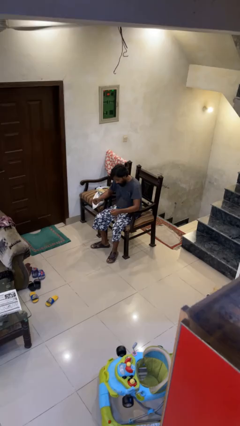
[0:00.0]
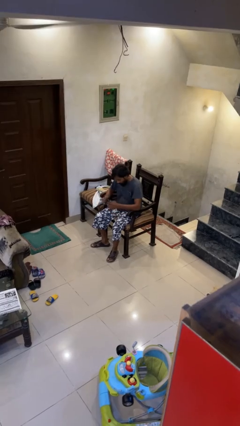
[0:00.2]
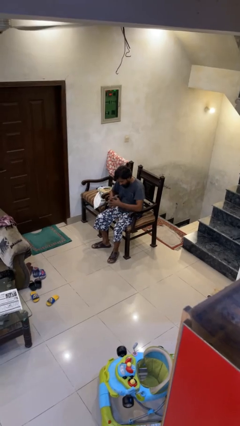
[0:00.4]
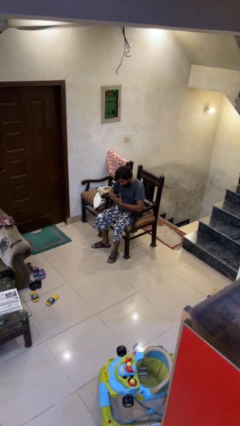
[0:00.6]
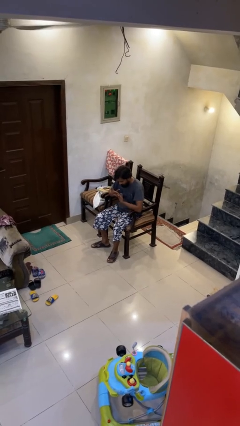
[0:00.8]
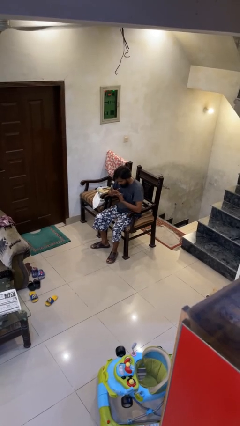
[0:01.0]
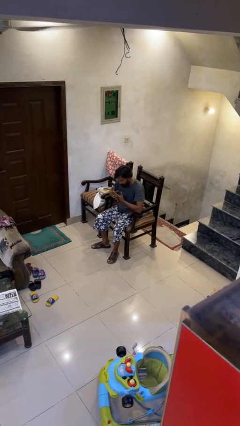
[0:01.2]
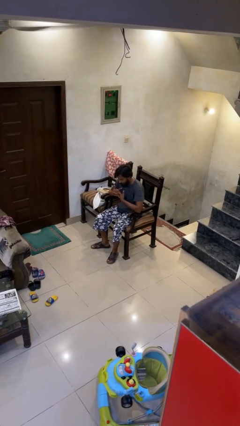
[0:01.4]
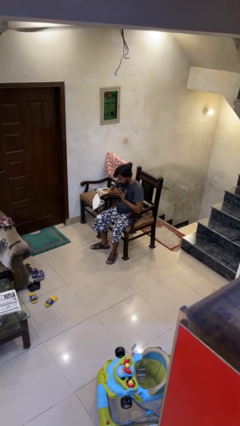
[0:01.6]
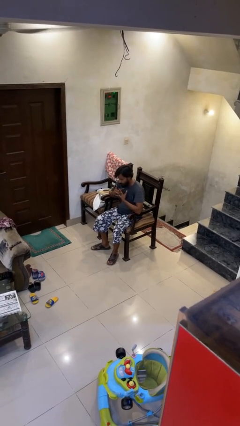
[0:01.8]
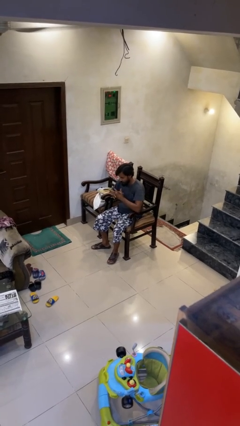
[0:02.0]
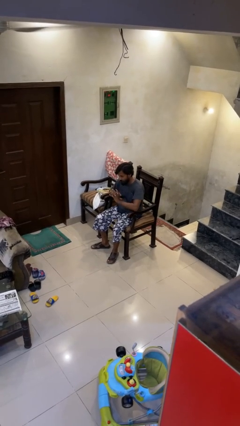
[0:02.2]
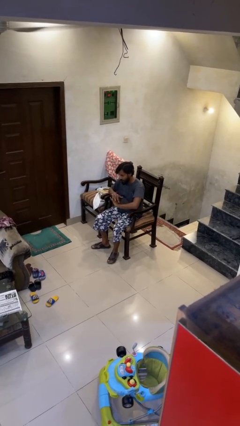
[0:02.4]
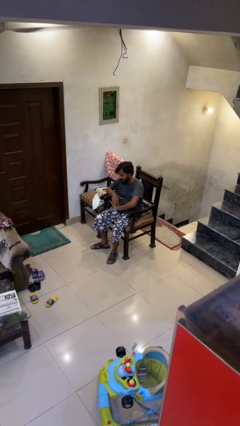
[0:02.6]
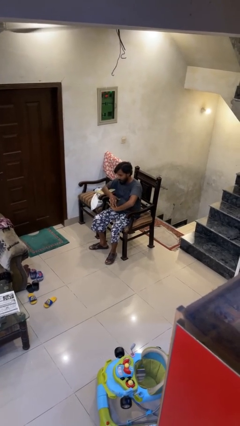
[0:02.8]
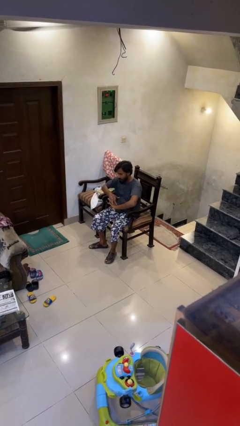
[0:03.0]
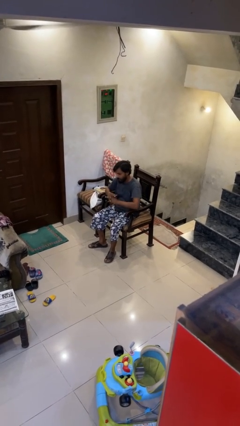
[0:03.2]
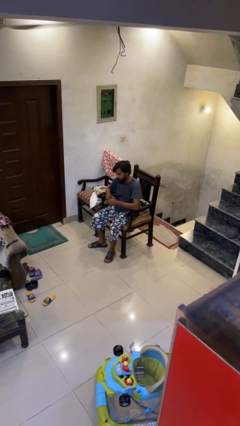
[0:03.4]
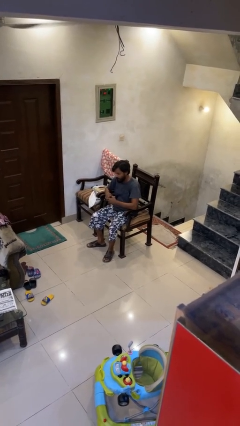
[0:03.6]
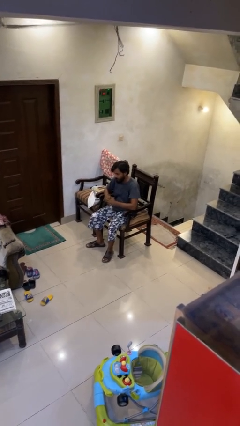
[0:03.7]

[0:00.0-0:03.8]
person cracks knuckles

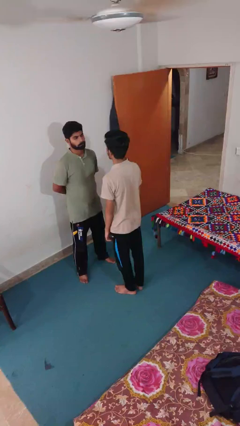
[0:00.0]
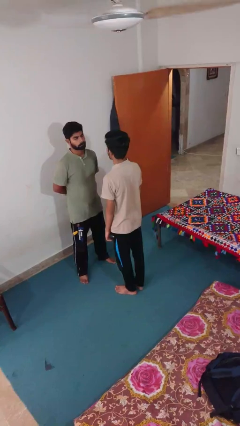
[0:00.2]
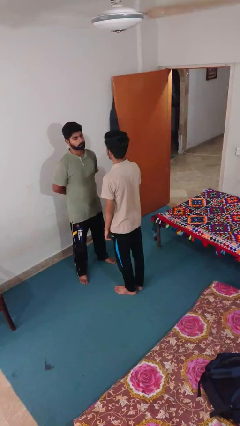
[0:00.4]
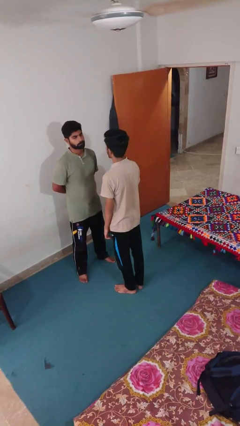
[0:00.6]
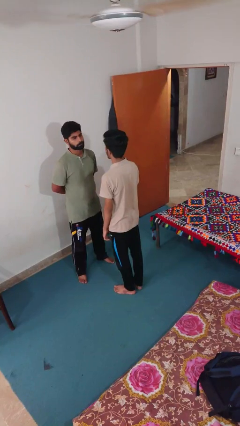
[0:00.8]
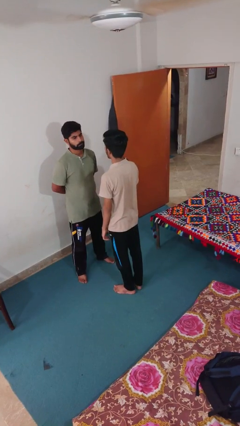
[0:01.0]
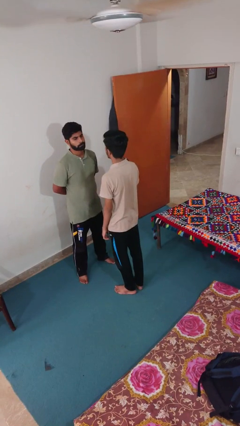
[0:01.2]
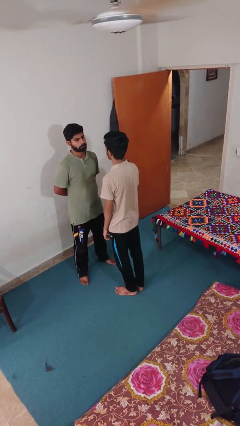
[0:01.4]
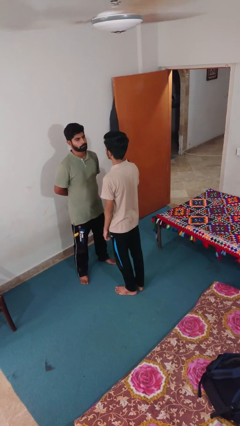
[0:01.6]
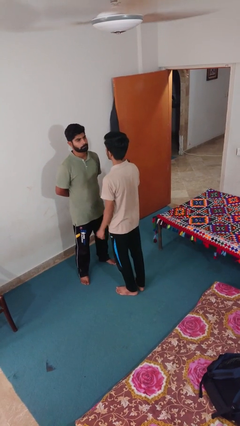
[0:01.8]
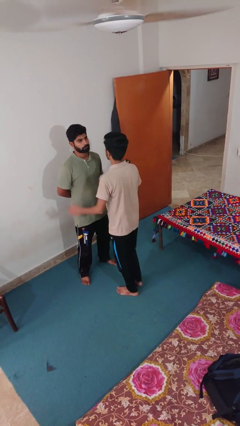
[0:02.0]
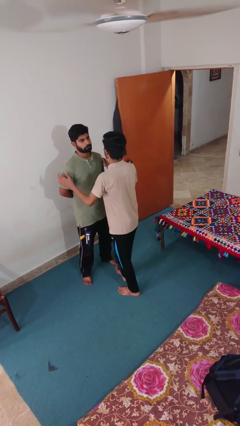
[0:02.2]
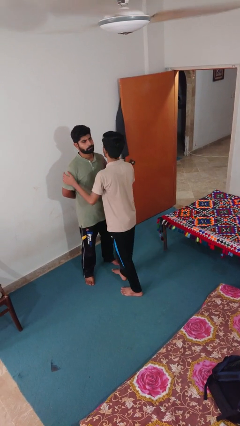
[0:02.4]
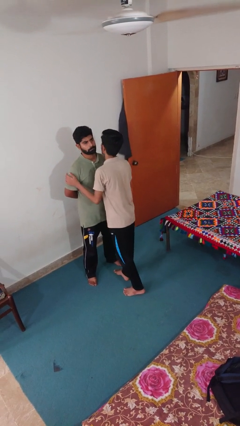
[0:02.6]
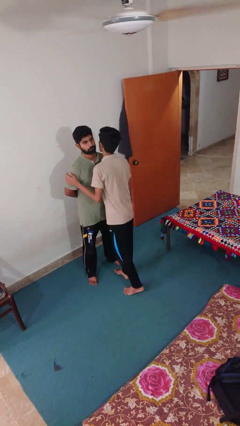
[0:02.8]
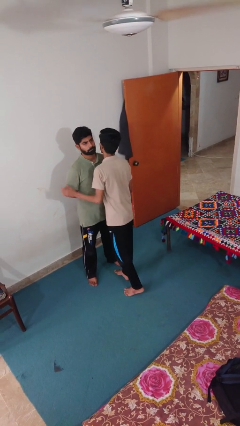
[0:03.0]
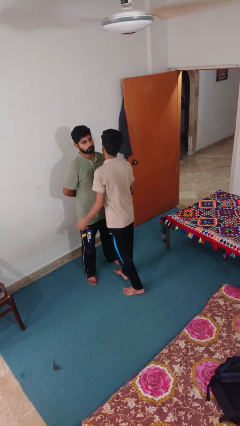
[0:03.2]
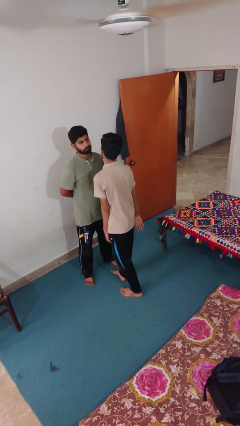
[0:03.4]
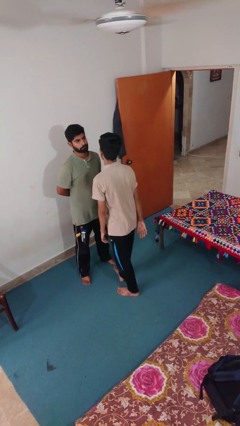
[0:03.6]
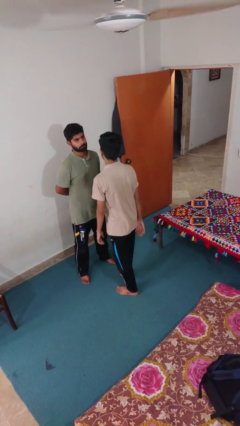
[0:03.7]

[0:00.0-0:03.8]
person kisses cheek of person

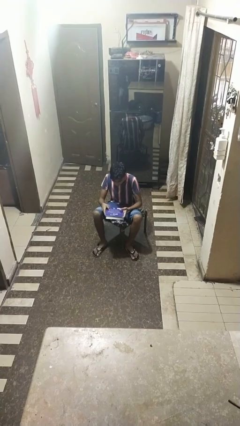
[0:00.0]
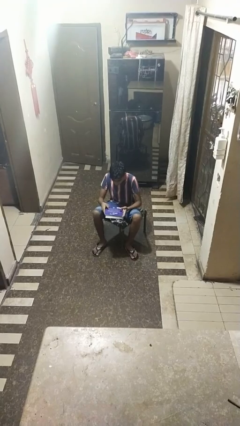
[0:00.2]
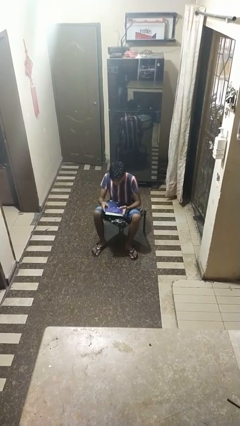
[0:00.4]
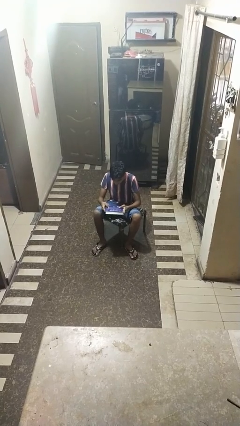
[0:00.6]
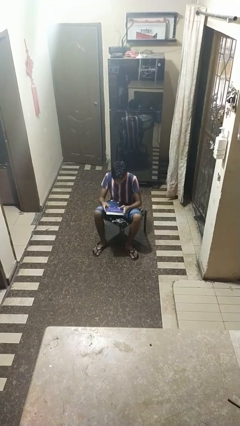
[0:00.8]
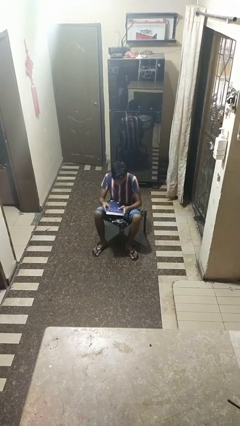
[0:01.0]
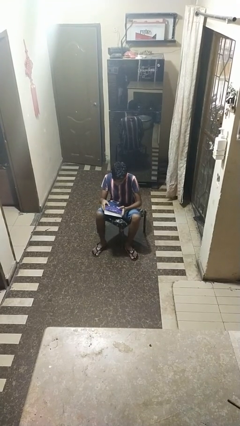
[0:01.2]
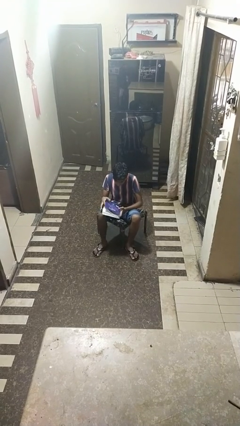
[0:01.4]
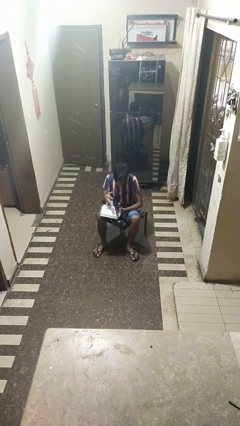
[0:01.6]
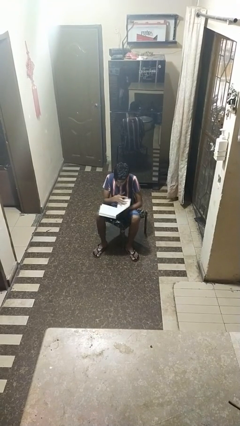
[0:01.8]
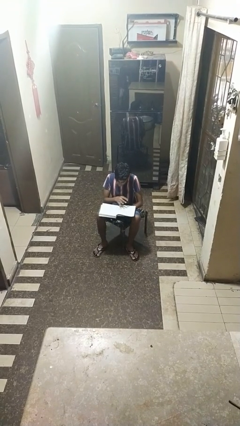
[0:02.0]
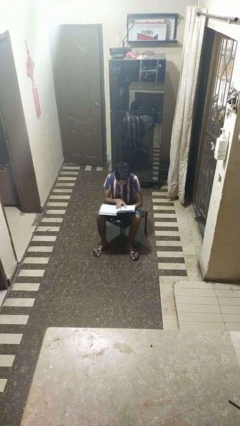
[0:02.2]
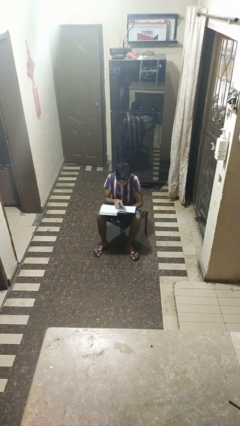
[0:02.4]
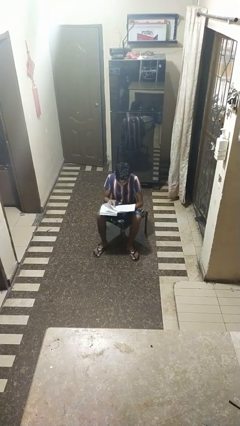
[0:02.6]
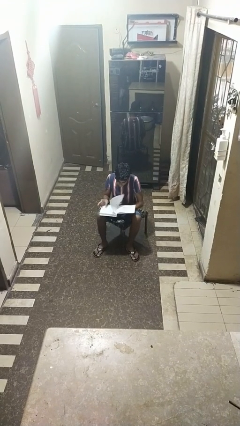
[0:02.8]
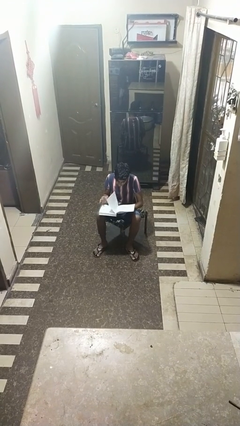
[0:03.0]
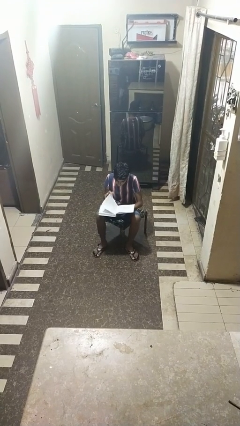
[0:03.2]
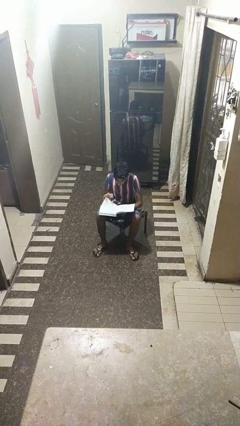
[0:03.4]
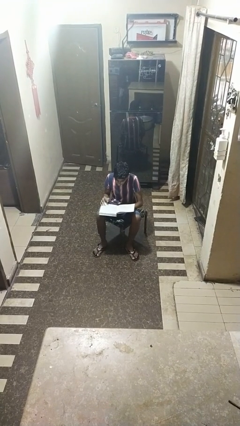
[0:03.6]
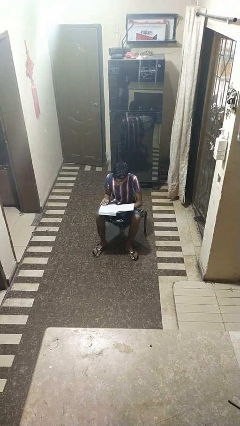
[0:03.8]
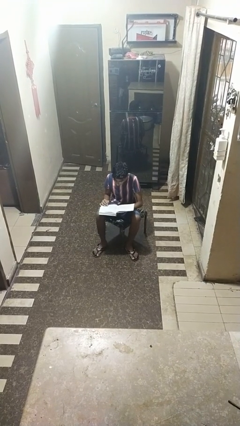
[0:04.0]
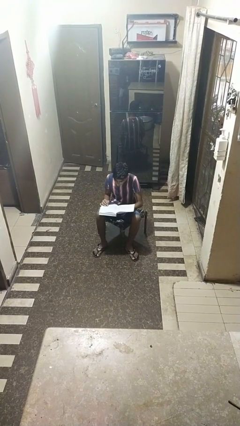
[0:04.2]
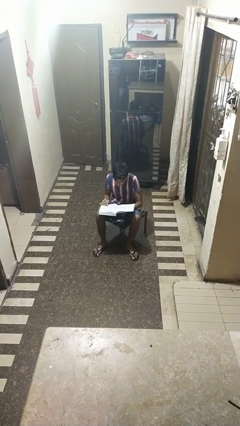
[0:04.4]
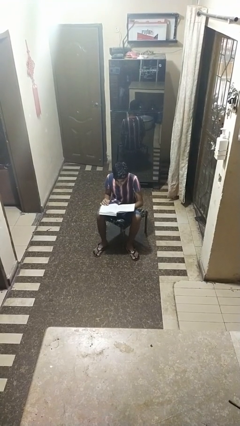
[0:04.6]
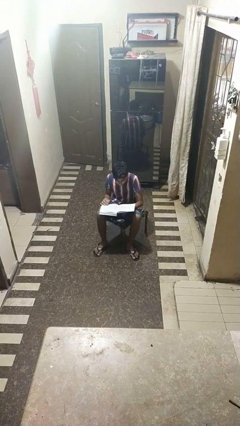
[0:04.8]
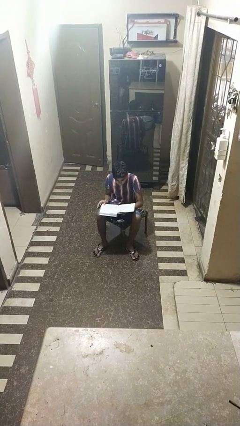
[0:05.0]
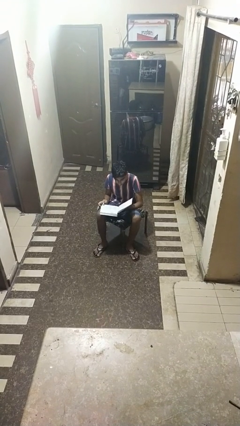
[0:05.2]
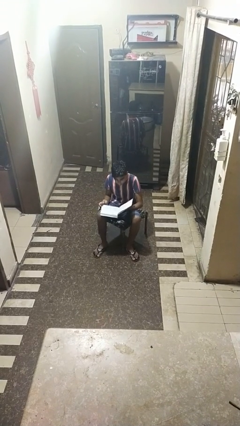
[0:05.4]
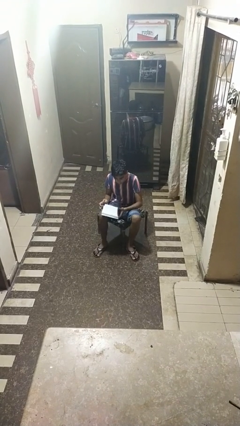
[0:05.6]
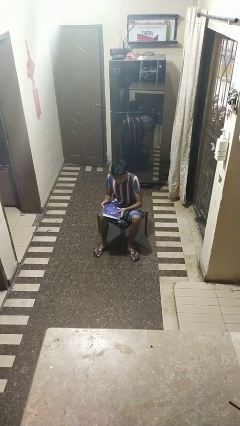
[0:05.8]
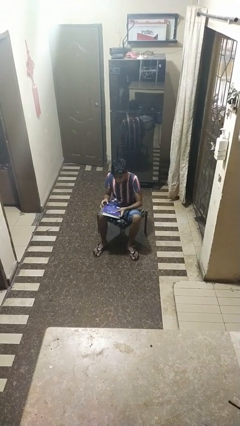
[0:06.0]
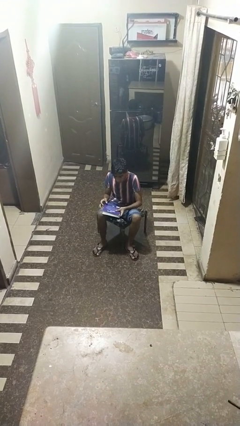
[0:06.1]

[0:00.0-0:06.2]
person reads book

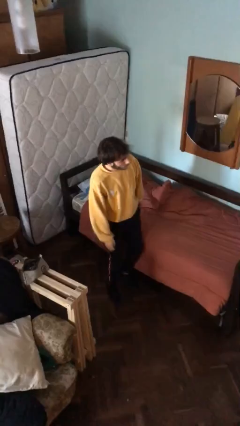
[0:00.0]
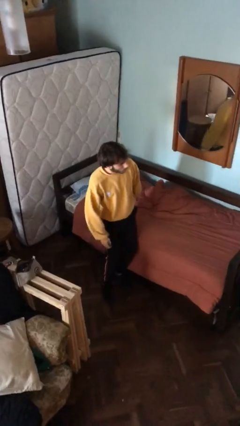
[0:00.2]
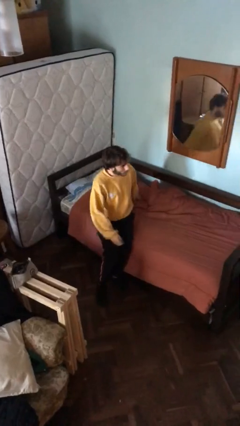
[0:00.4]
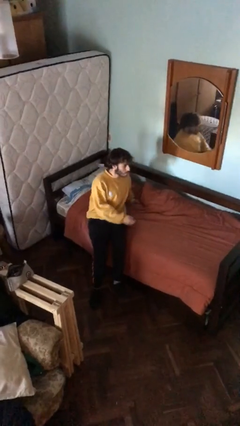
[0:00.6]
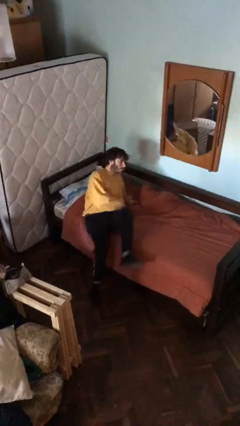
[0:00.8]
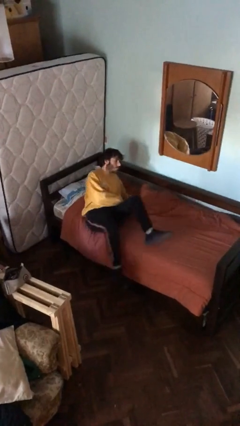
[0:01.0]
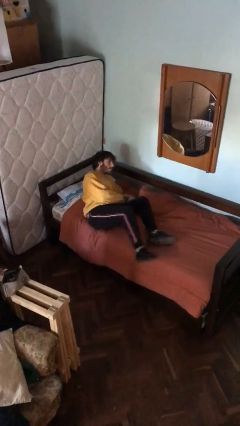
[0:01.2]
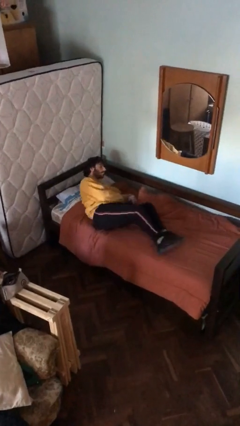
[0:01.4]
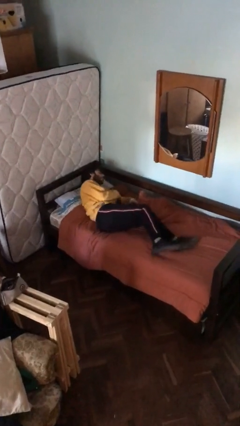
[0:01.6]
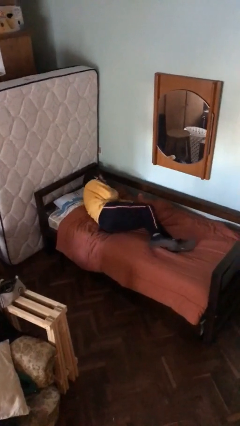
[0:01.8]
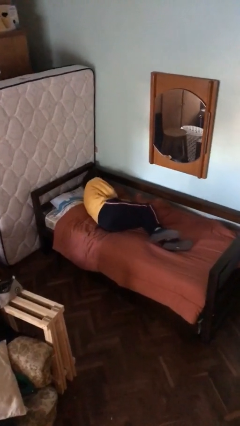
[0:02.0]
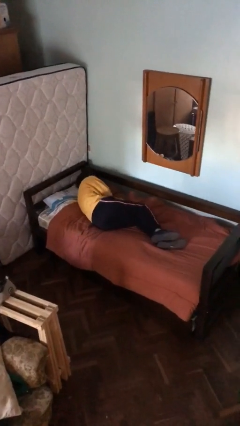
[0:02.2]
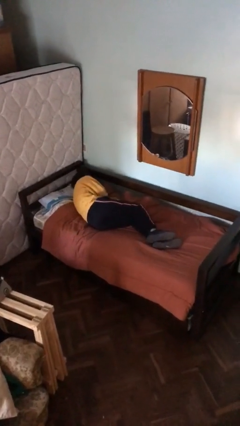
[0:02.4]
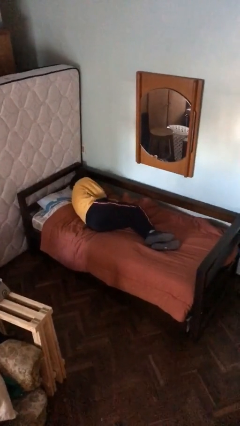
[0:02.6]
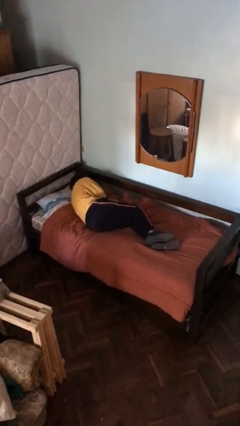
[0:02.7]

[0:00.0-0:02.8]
person lies down on bed

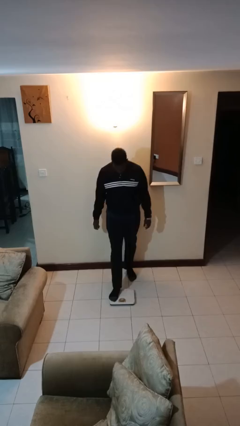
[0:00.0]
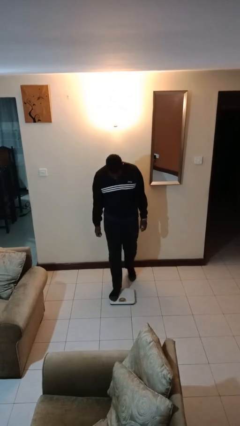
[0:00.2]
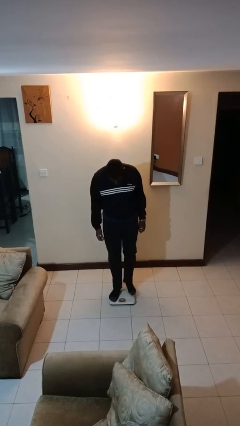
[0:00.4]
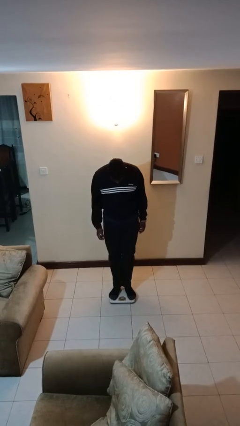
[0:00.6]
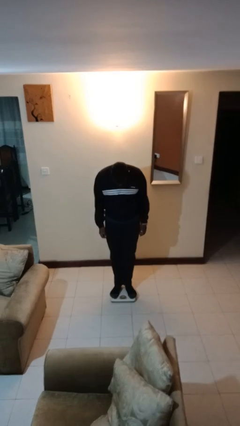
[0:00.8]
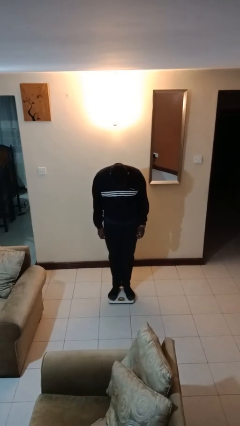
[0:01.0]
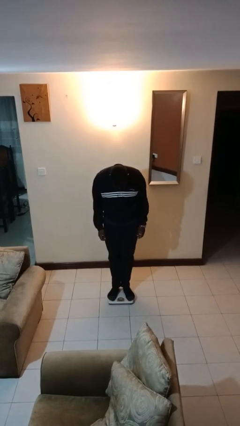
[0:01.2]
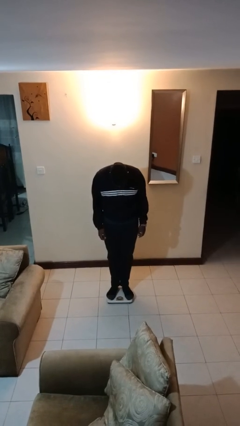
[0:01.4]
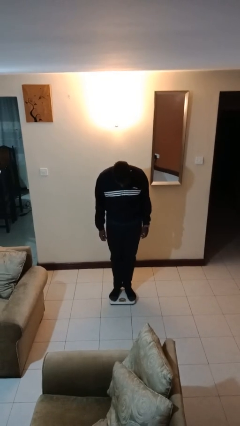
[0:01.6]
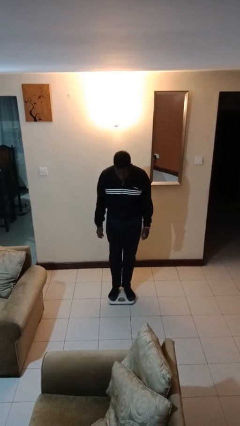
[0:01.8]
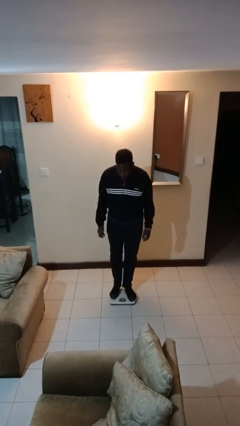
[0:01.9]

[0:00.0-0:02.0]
person uses bodyweight scale
